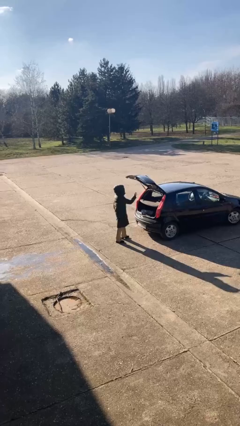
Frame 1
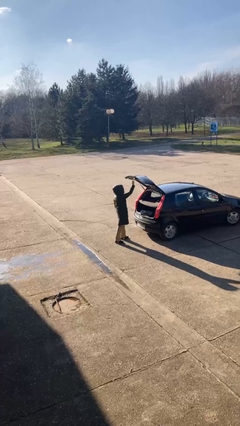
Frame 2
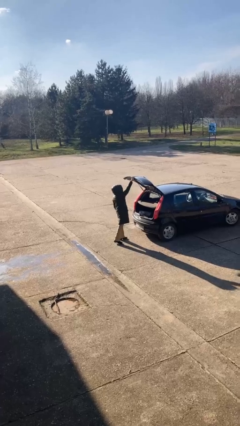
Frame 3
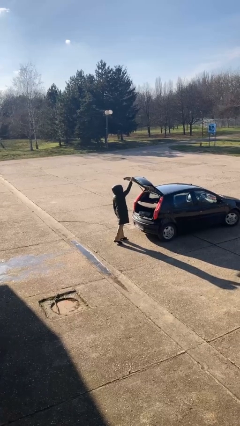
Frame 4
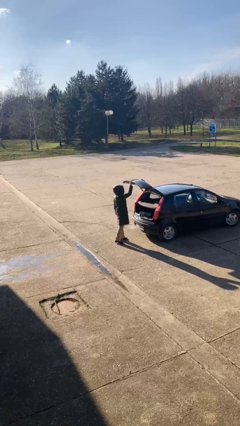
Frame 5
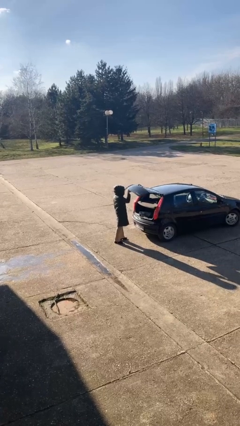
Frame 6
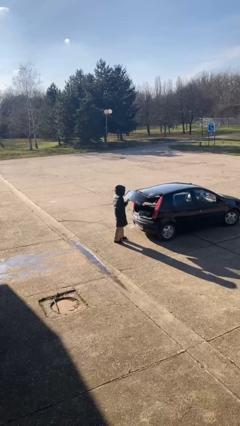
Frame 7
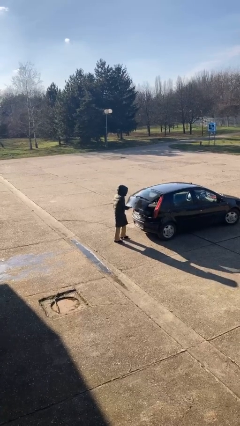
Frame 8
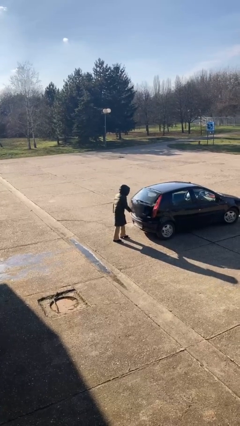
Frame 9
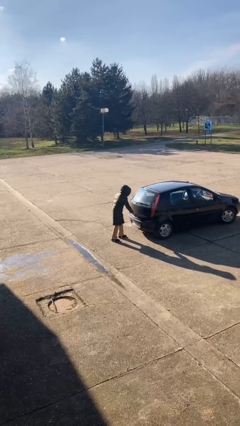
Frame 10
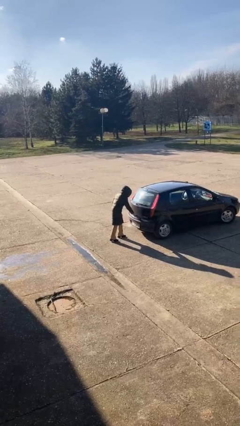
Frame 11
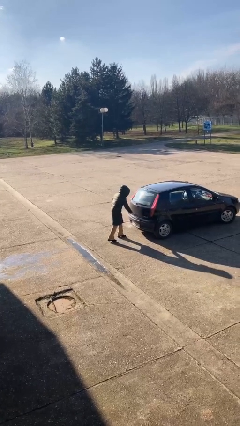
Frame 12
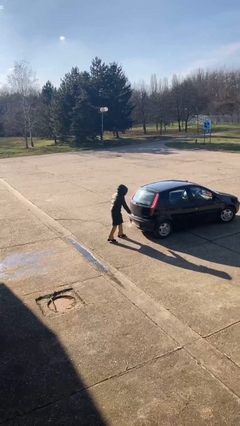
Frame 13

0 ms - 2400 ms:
person closes car trunk

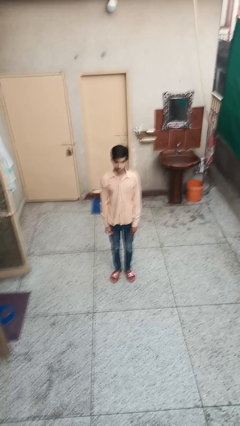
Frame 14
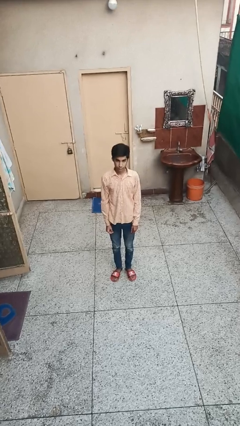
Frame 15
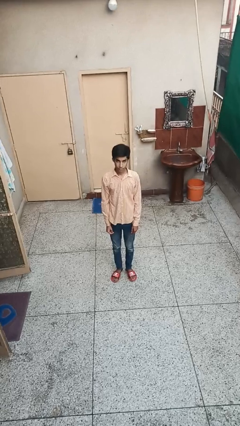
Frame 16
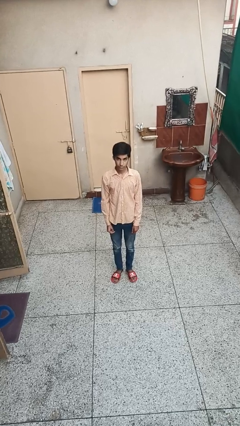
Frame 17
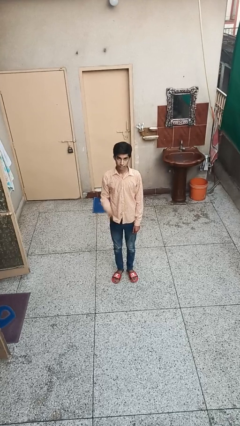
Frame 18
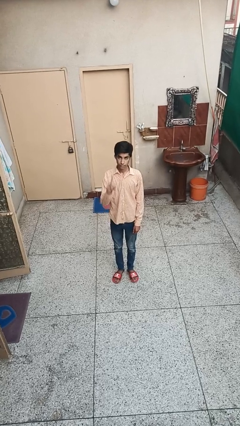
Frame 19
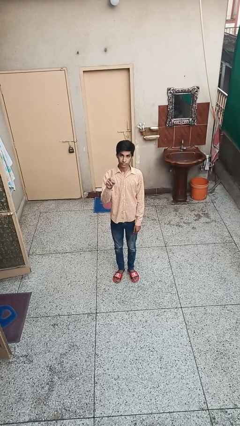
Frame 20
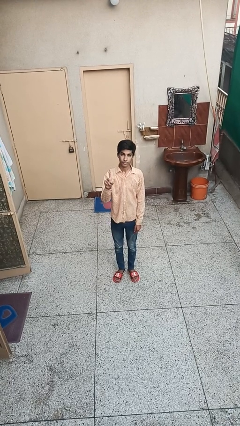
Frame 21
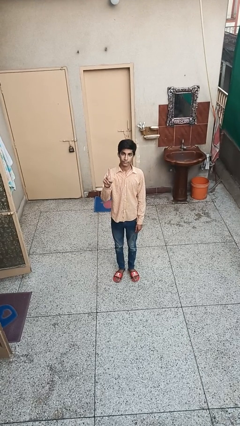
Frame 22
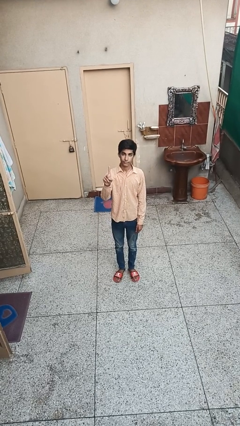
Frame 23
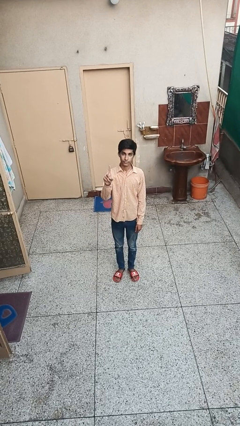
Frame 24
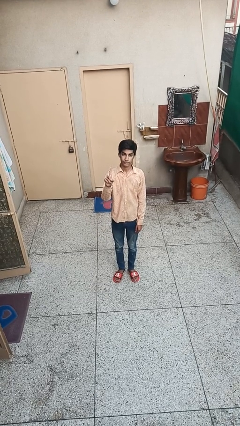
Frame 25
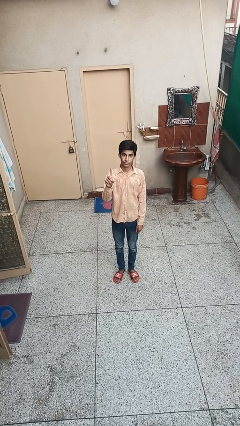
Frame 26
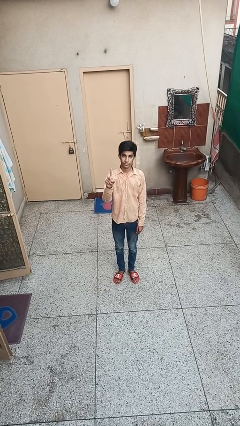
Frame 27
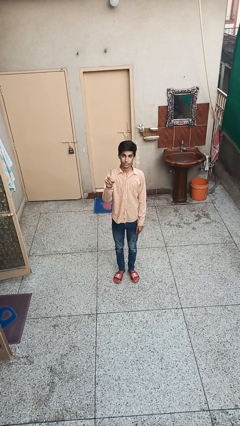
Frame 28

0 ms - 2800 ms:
person gestures number one

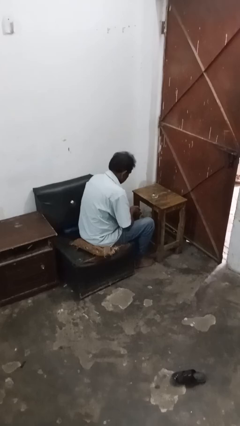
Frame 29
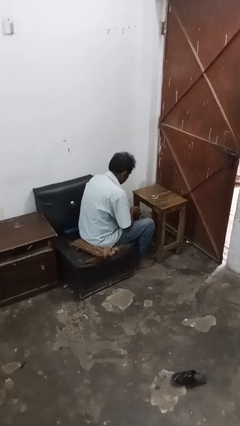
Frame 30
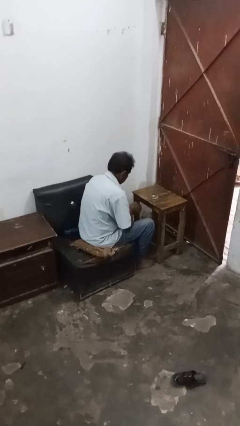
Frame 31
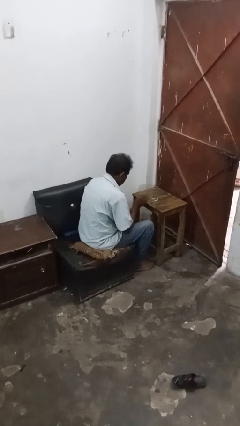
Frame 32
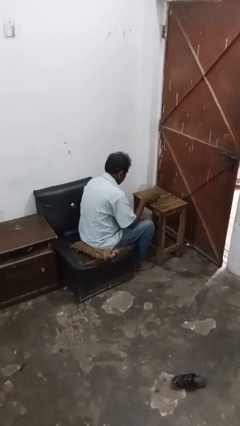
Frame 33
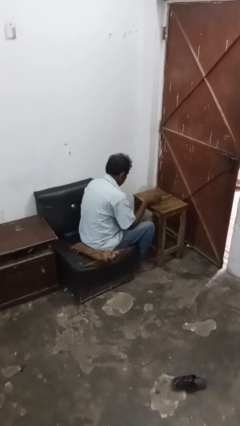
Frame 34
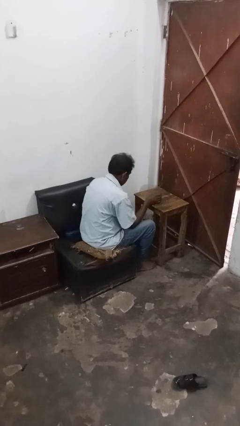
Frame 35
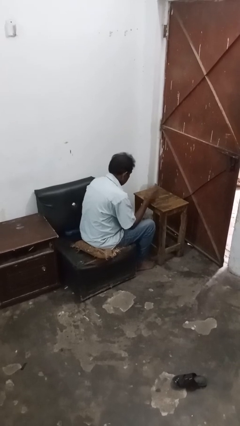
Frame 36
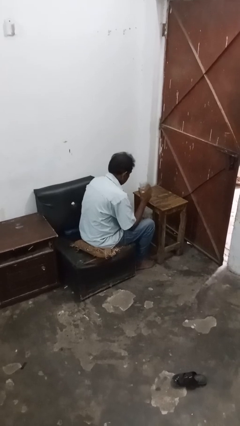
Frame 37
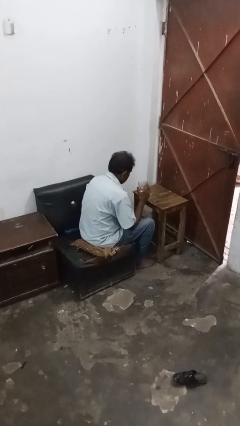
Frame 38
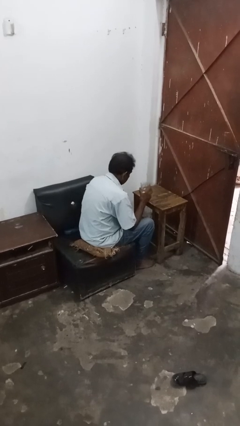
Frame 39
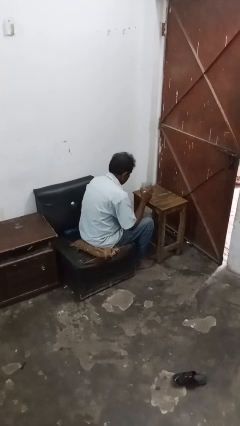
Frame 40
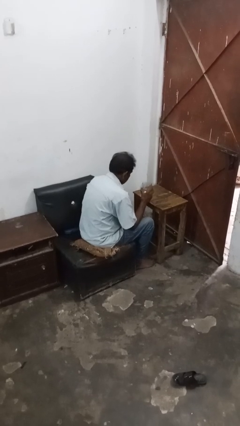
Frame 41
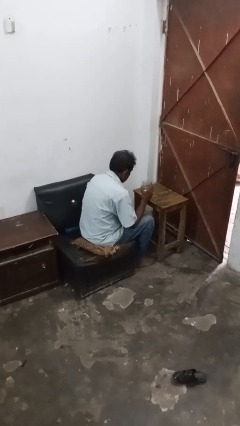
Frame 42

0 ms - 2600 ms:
person picks up object from table

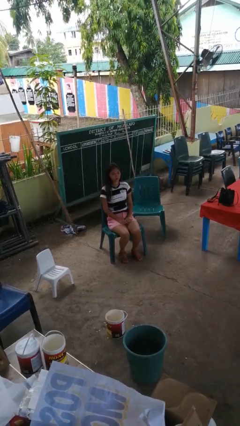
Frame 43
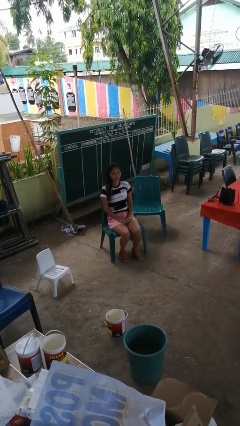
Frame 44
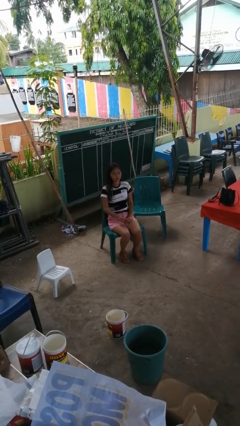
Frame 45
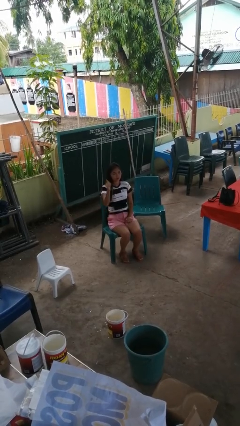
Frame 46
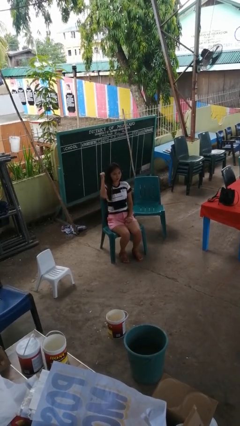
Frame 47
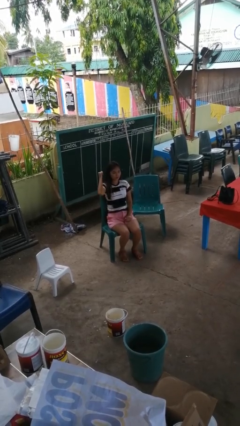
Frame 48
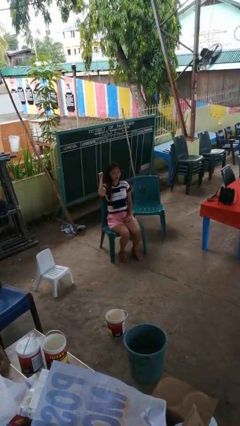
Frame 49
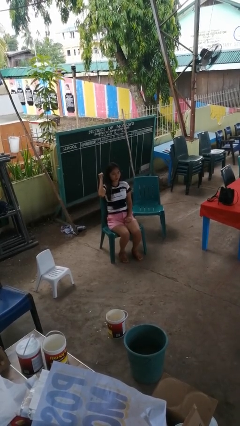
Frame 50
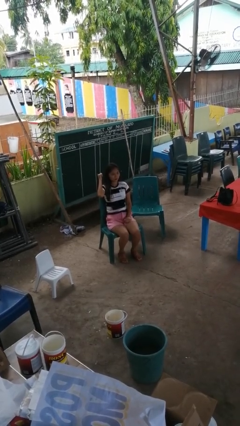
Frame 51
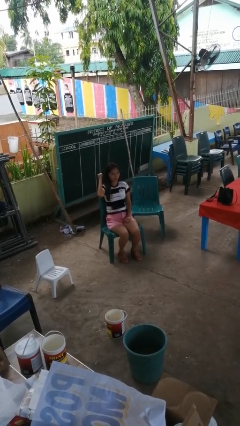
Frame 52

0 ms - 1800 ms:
person gestures behind me

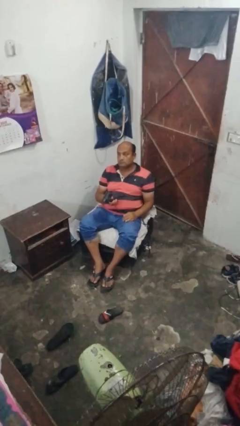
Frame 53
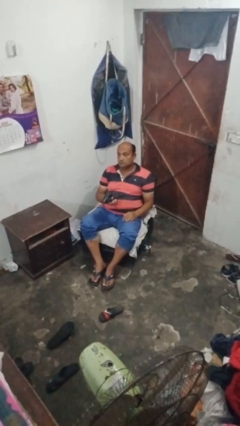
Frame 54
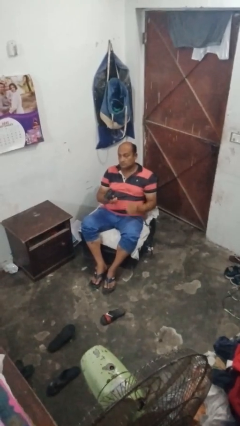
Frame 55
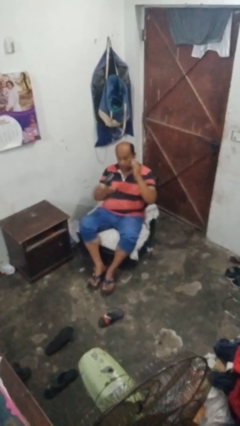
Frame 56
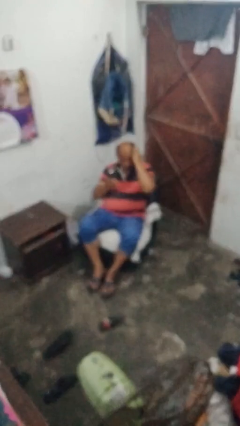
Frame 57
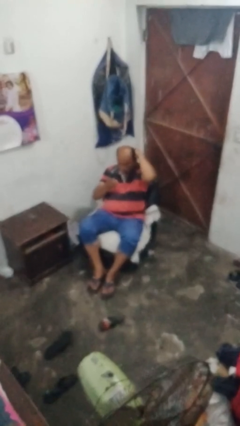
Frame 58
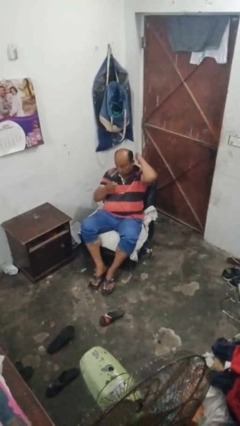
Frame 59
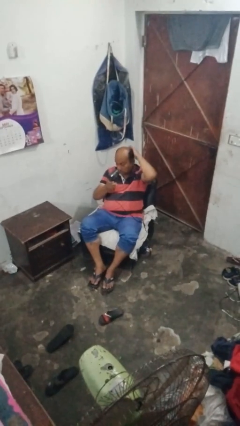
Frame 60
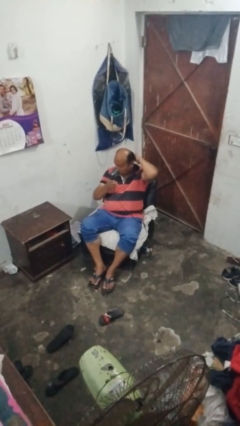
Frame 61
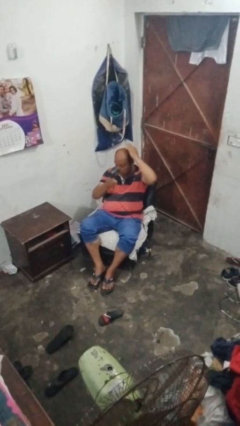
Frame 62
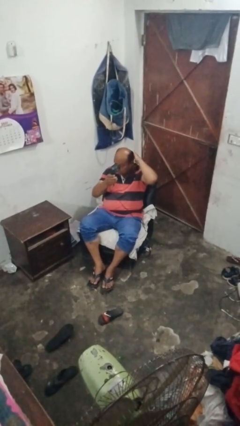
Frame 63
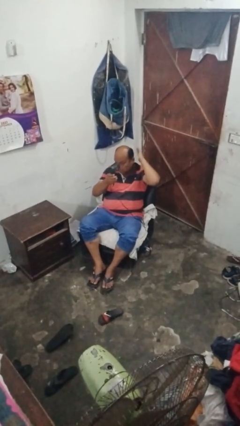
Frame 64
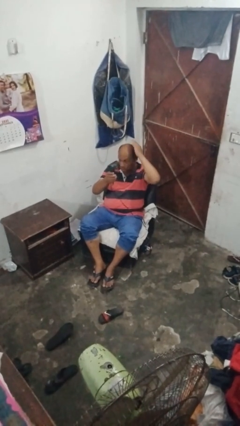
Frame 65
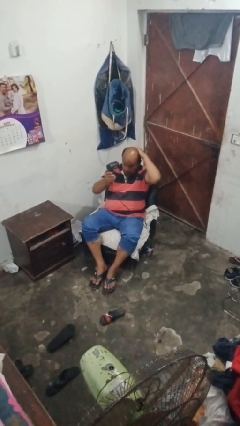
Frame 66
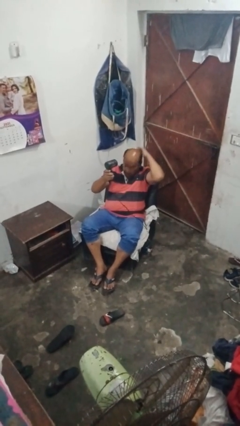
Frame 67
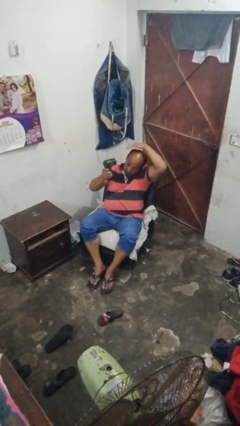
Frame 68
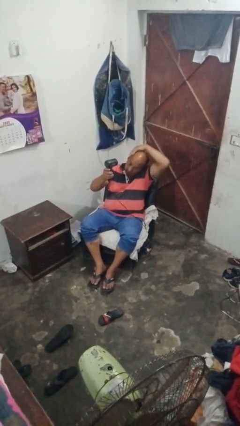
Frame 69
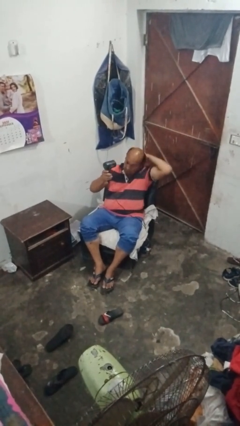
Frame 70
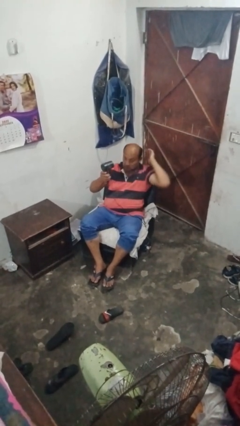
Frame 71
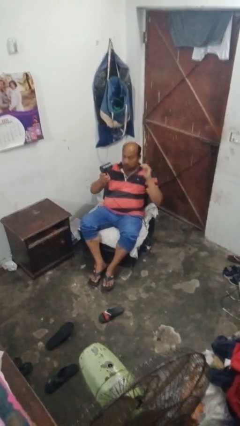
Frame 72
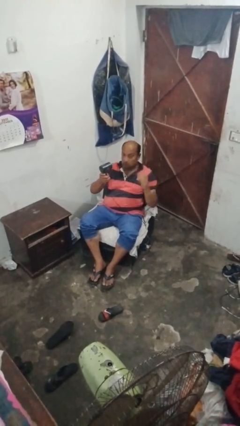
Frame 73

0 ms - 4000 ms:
person dries hair with hairdryer

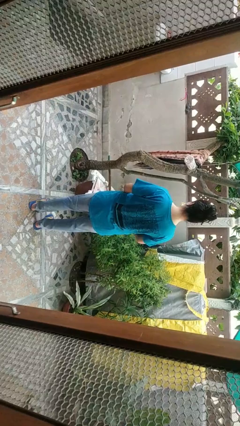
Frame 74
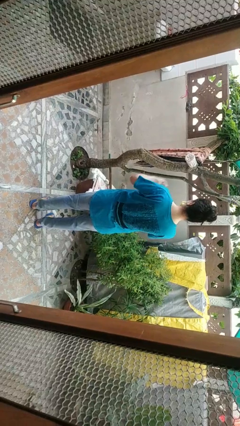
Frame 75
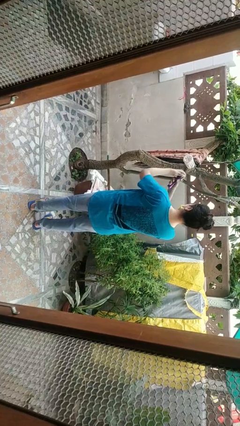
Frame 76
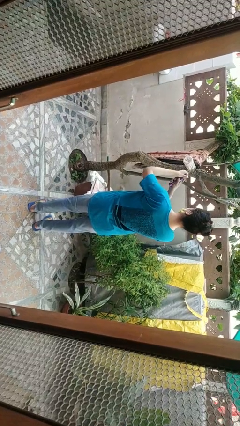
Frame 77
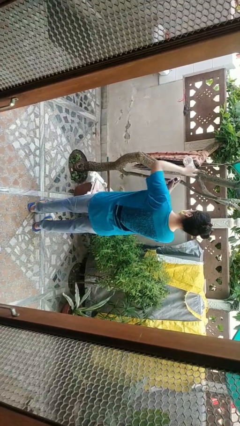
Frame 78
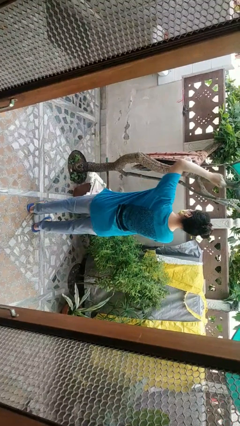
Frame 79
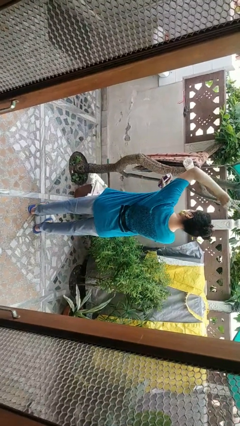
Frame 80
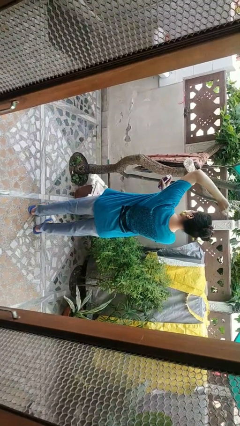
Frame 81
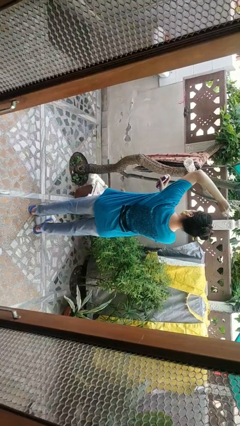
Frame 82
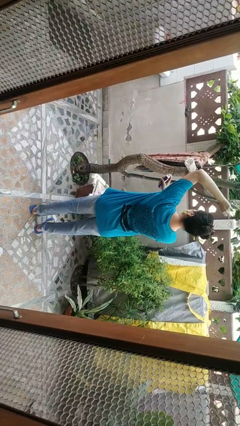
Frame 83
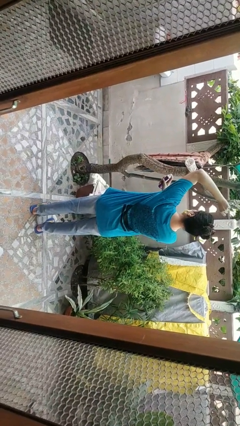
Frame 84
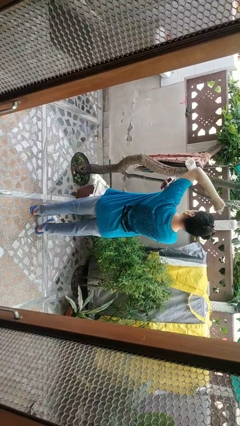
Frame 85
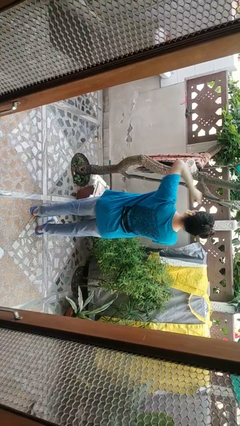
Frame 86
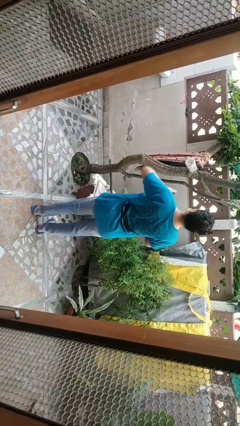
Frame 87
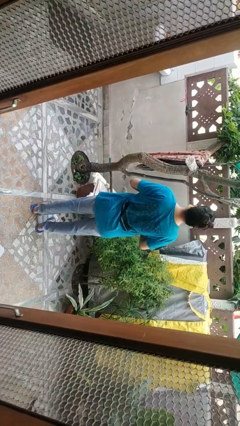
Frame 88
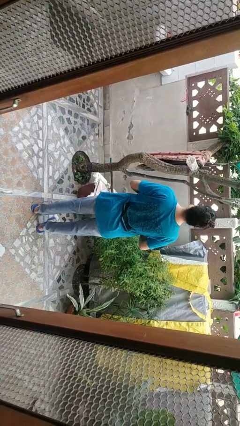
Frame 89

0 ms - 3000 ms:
person applies deodorant

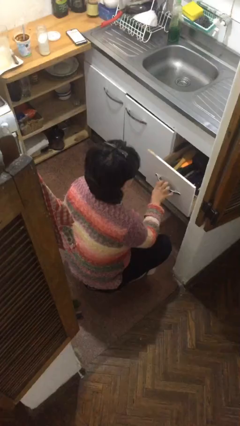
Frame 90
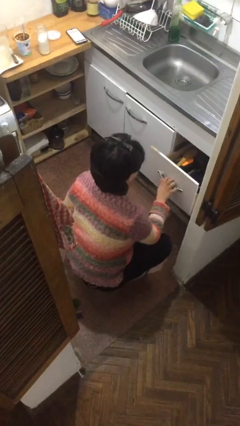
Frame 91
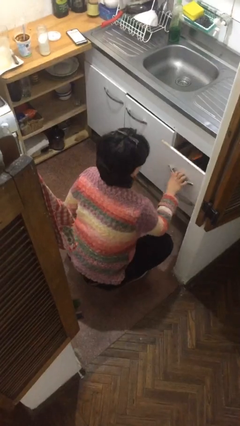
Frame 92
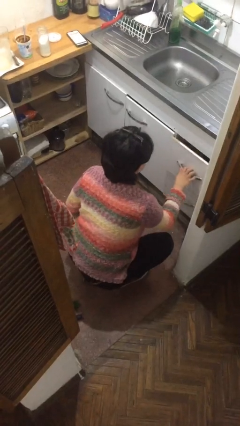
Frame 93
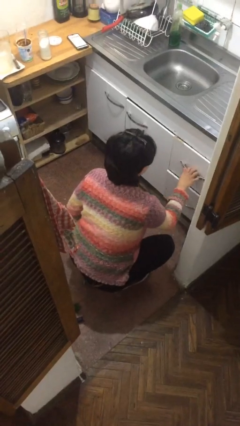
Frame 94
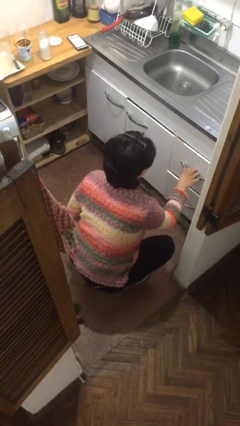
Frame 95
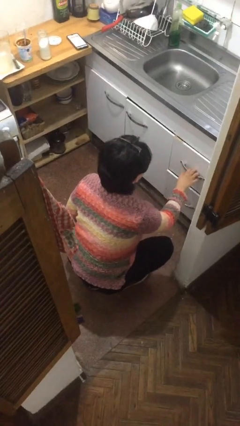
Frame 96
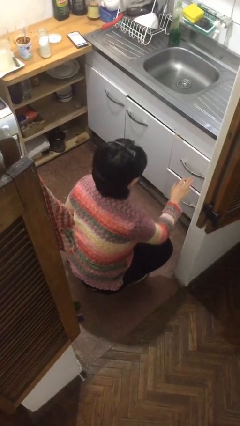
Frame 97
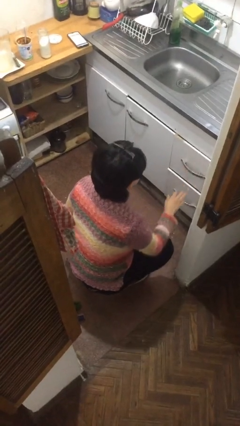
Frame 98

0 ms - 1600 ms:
person closes kitchen drawer
